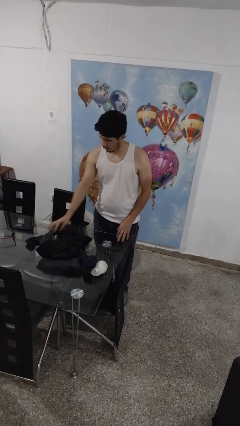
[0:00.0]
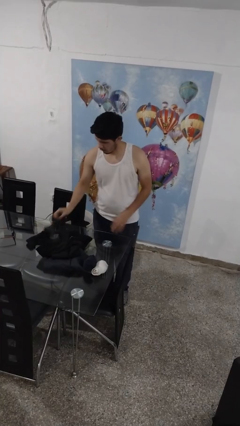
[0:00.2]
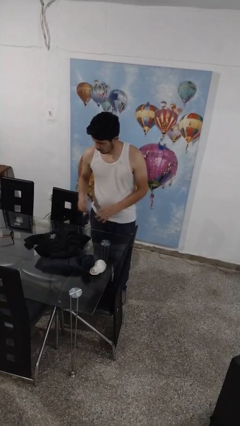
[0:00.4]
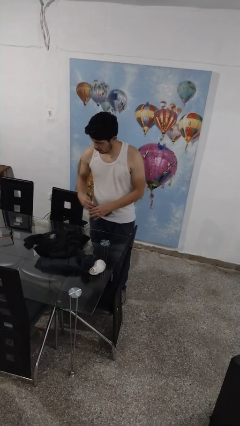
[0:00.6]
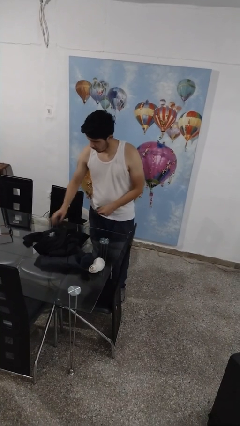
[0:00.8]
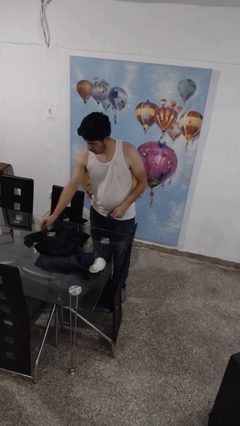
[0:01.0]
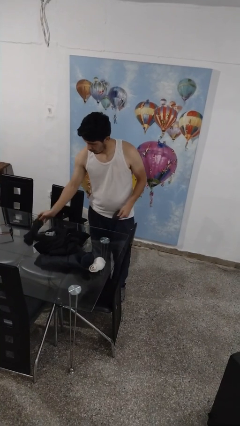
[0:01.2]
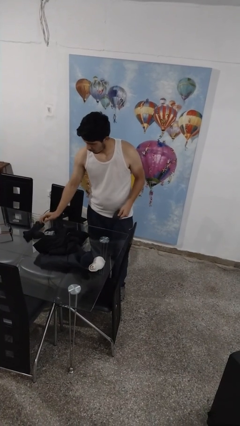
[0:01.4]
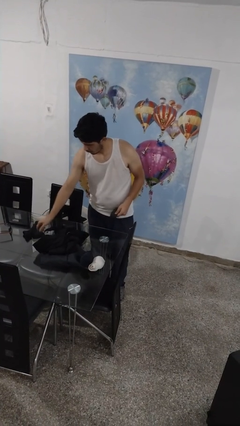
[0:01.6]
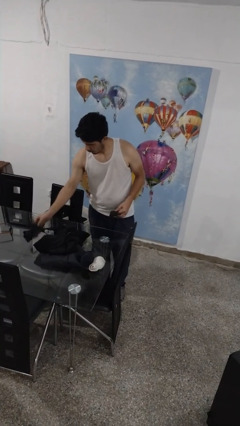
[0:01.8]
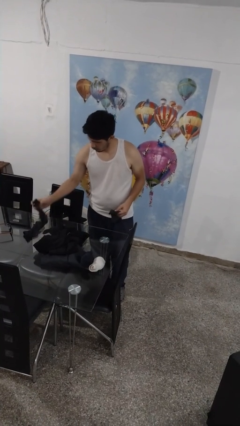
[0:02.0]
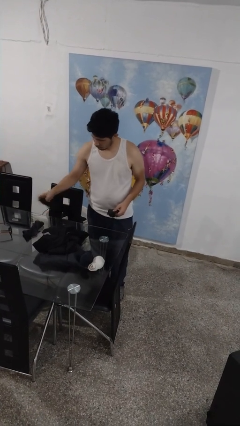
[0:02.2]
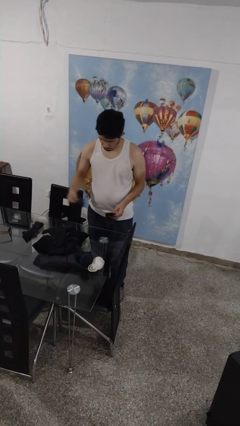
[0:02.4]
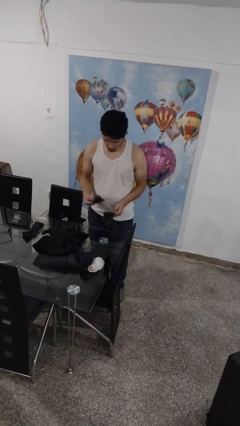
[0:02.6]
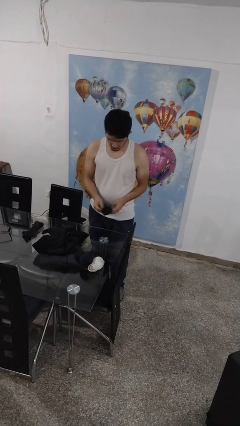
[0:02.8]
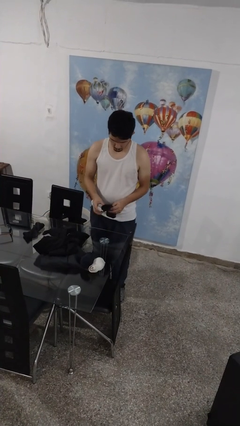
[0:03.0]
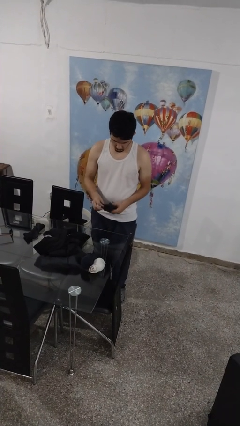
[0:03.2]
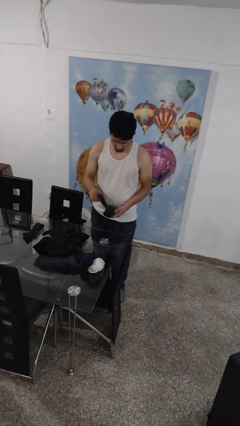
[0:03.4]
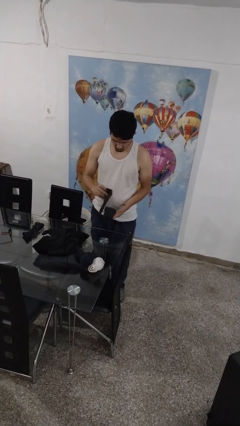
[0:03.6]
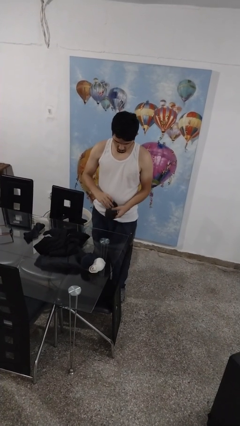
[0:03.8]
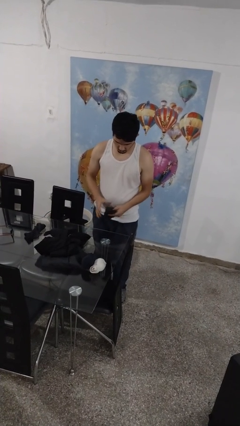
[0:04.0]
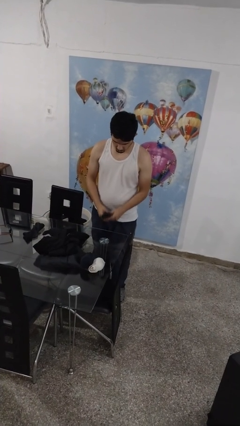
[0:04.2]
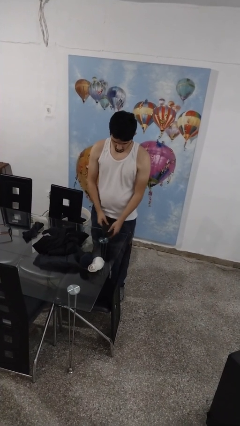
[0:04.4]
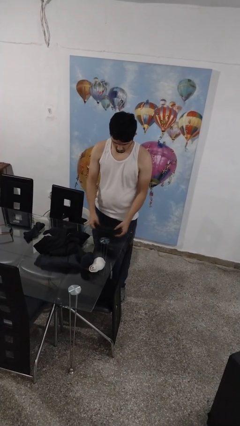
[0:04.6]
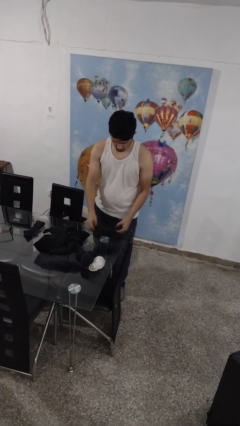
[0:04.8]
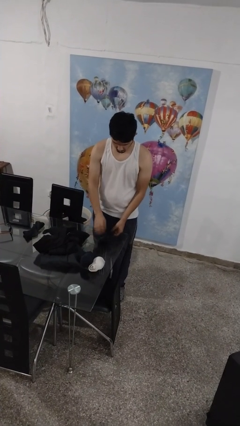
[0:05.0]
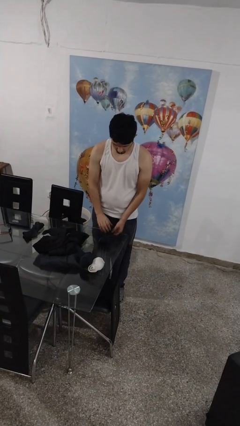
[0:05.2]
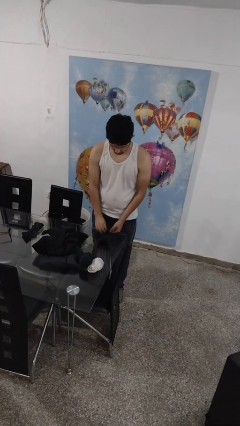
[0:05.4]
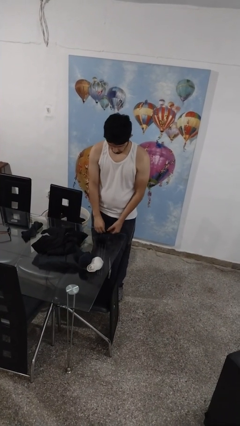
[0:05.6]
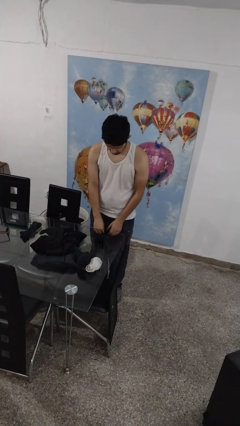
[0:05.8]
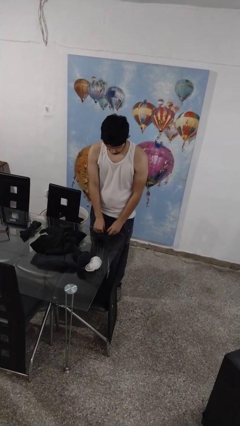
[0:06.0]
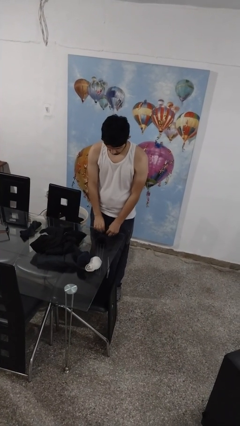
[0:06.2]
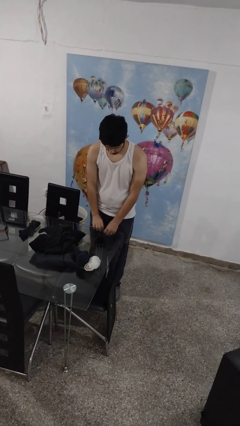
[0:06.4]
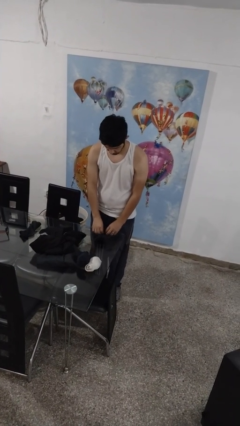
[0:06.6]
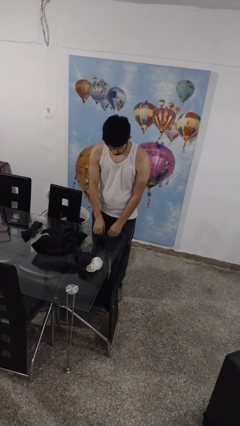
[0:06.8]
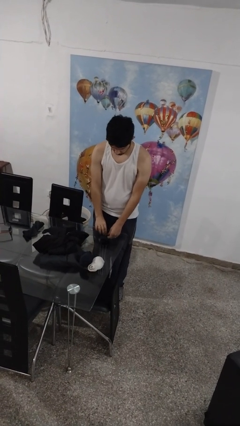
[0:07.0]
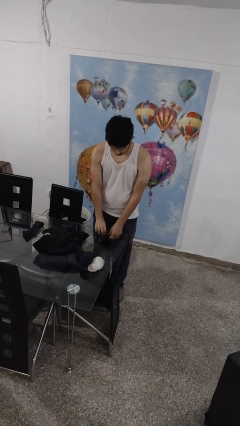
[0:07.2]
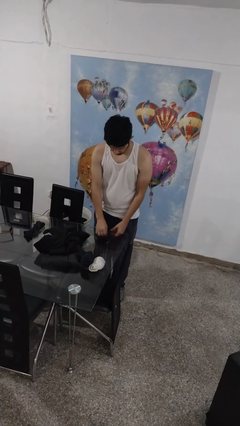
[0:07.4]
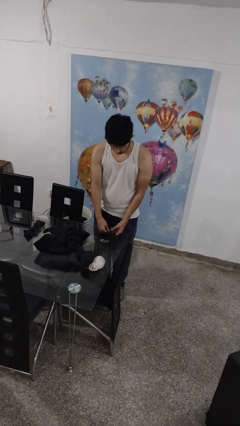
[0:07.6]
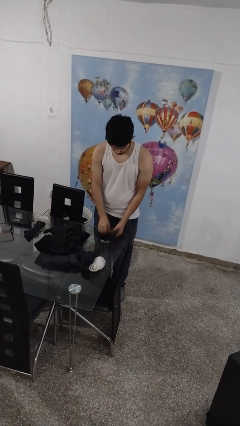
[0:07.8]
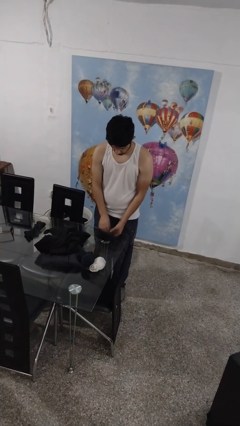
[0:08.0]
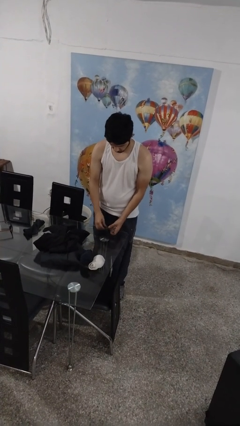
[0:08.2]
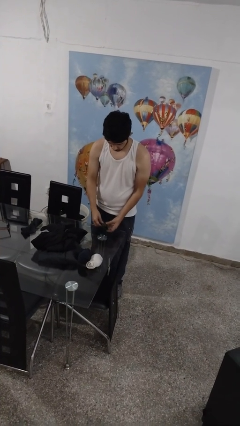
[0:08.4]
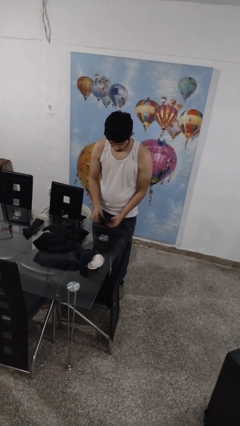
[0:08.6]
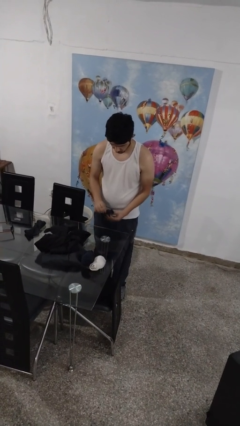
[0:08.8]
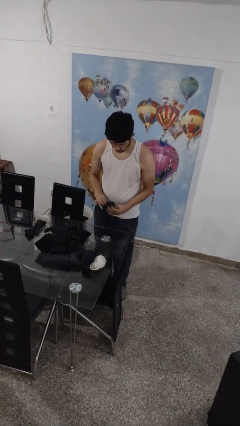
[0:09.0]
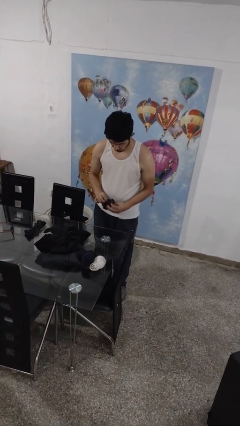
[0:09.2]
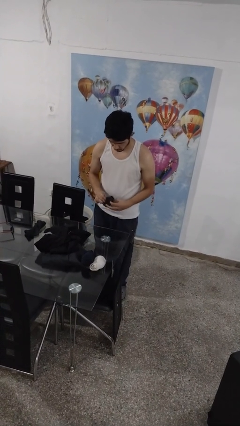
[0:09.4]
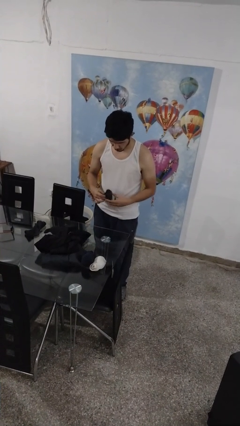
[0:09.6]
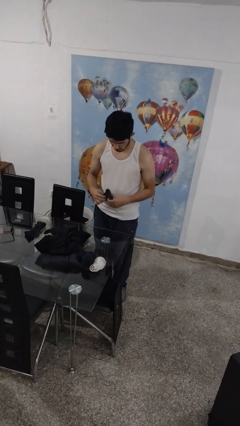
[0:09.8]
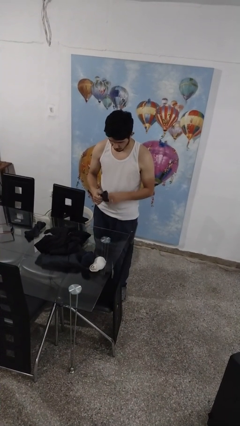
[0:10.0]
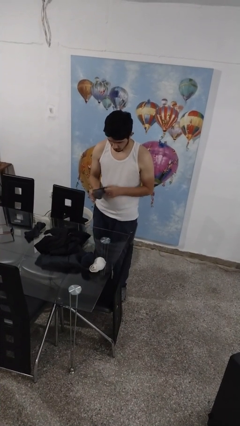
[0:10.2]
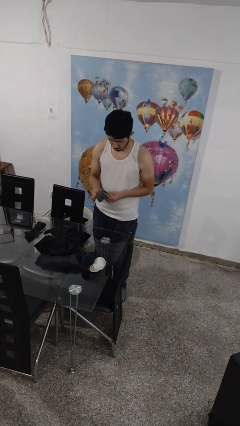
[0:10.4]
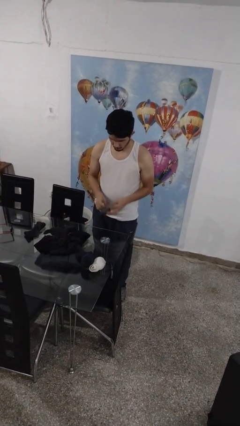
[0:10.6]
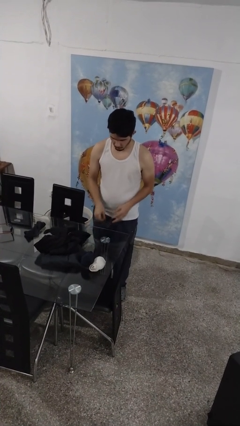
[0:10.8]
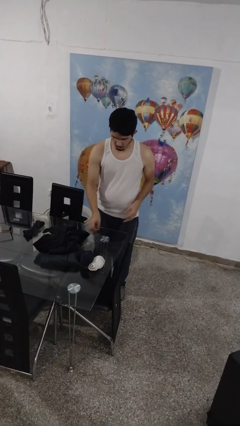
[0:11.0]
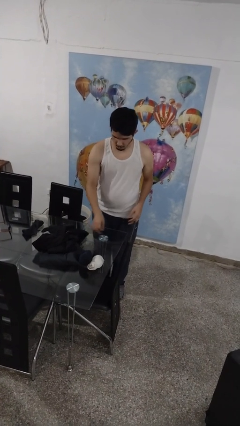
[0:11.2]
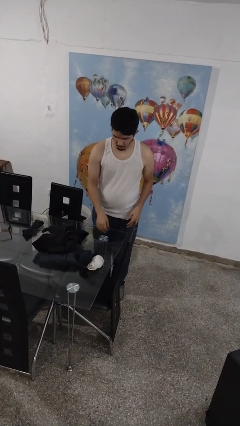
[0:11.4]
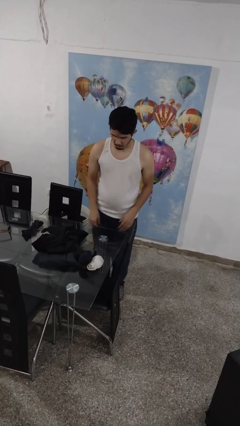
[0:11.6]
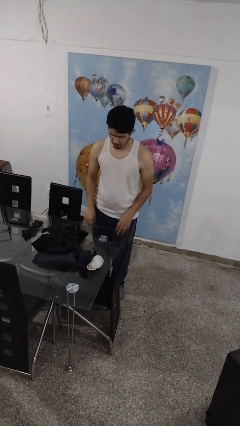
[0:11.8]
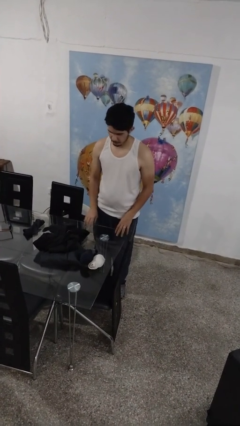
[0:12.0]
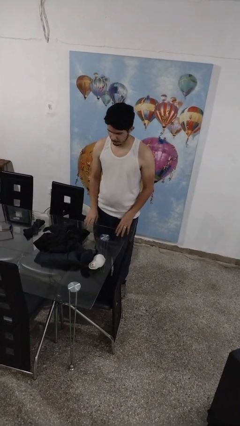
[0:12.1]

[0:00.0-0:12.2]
person folds socks

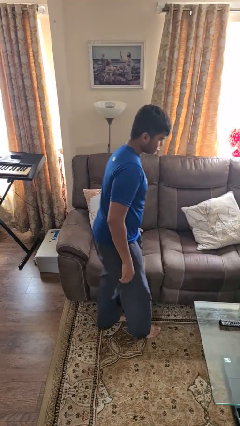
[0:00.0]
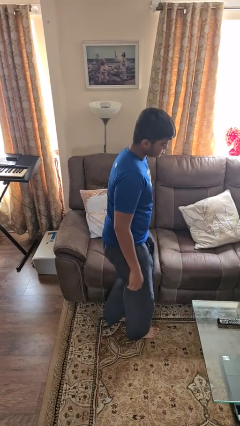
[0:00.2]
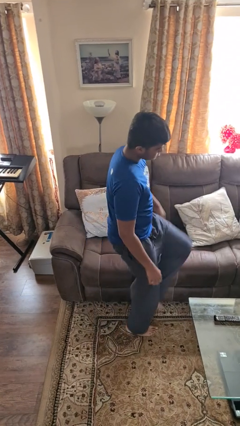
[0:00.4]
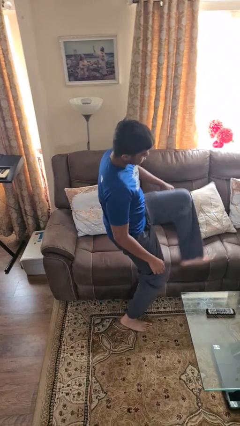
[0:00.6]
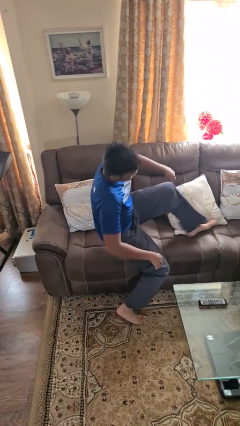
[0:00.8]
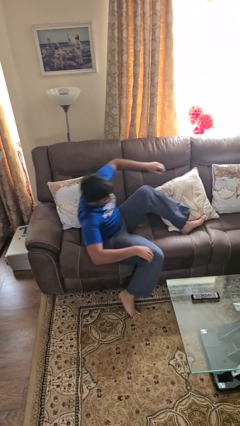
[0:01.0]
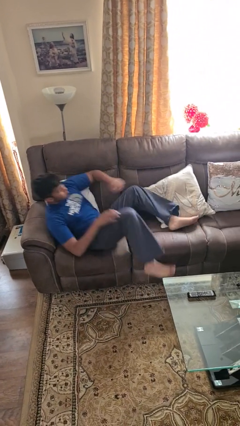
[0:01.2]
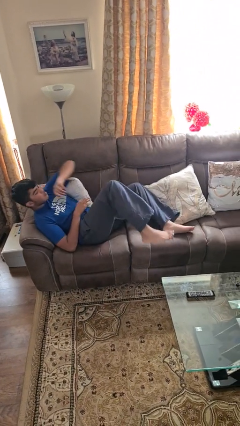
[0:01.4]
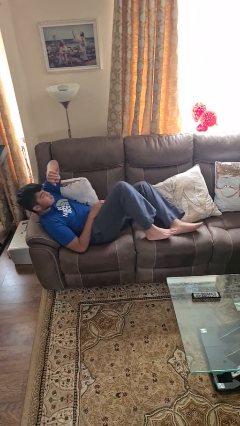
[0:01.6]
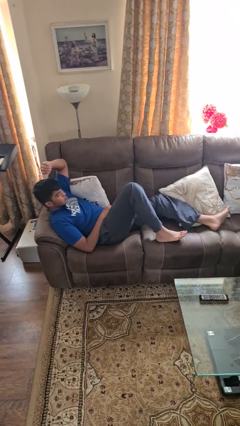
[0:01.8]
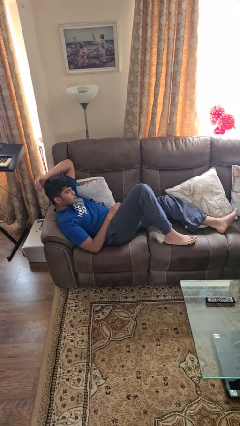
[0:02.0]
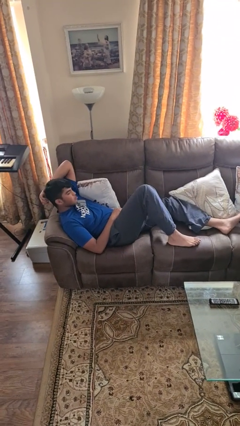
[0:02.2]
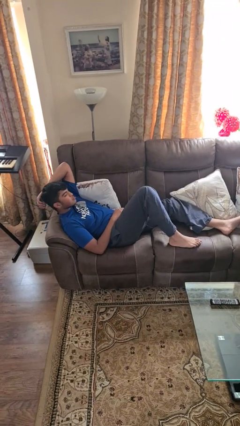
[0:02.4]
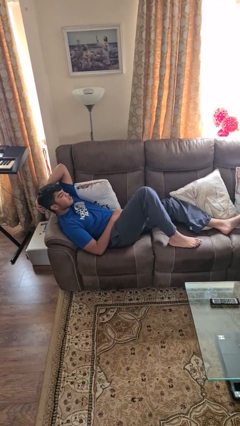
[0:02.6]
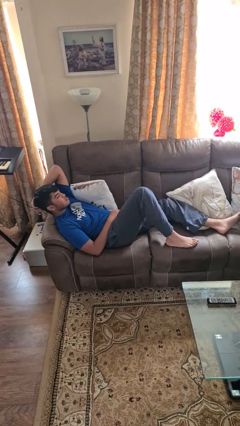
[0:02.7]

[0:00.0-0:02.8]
person lies down on couch

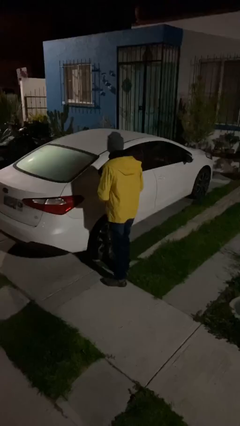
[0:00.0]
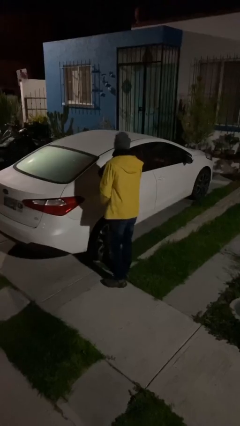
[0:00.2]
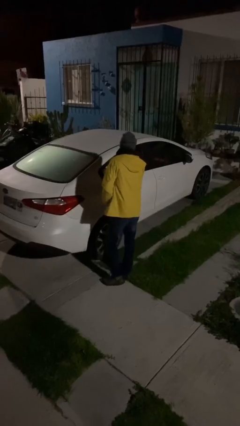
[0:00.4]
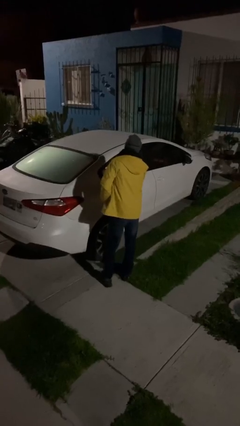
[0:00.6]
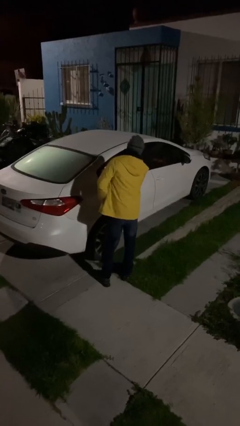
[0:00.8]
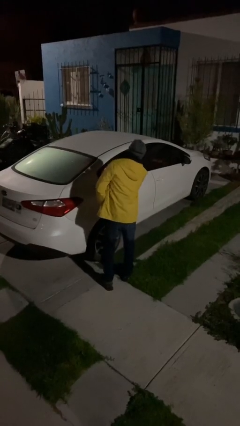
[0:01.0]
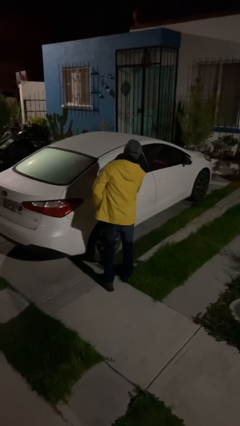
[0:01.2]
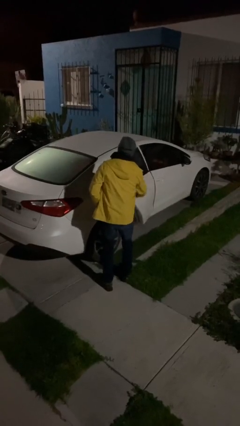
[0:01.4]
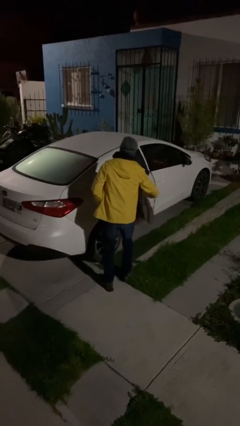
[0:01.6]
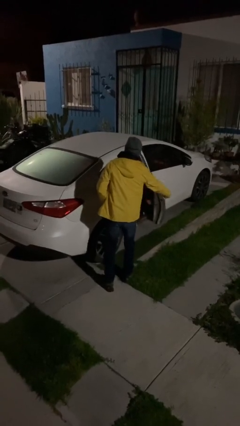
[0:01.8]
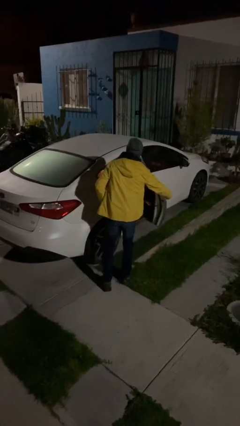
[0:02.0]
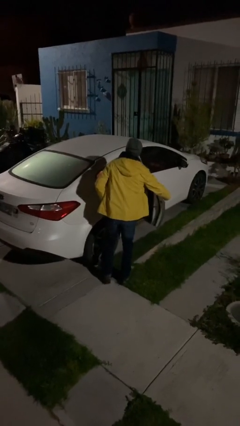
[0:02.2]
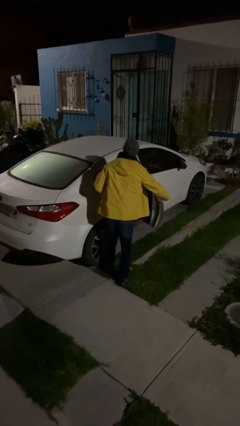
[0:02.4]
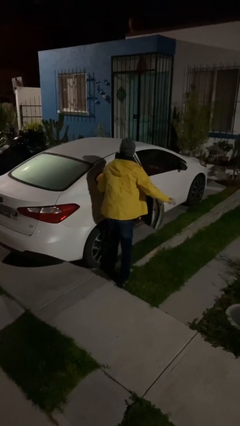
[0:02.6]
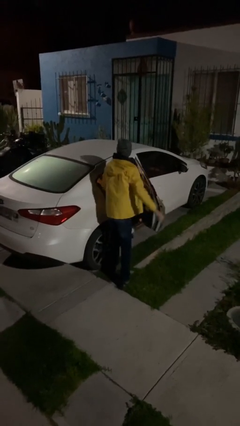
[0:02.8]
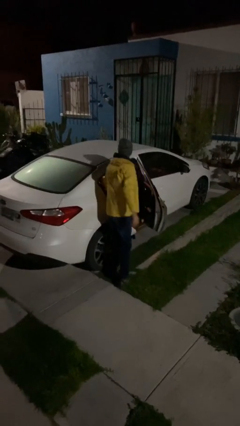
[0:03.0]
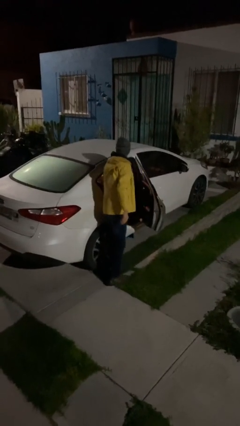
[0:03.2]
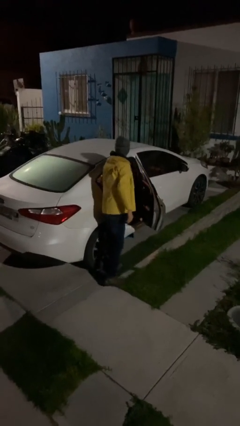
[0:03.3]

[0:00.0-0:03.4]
person opens car door
